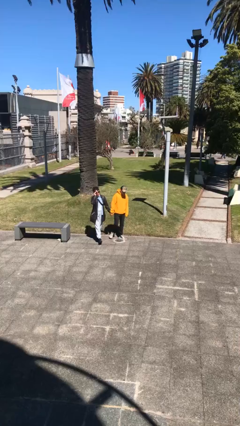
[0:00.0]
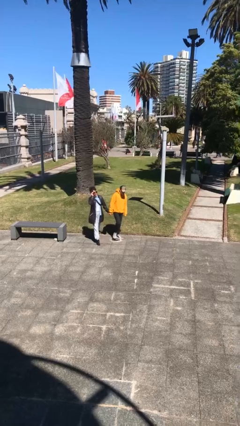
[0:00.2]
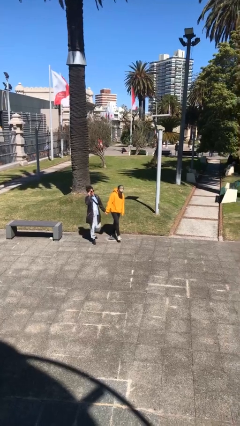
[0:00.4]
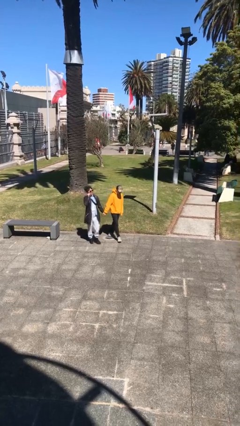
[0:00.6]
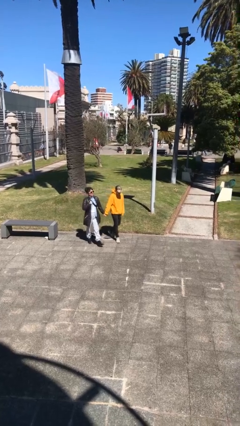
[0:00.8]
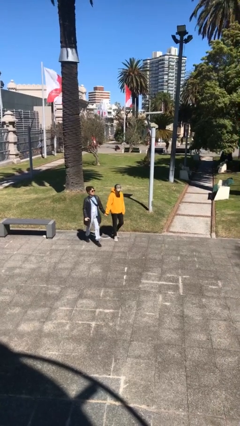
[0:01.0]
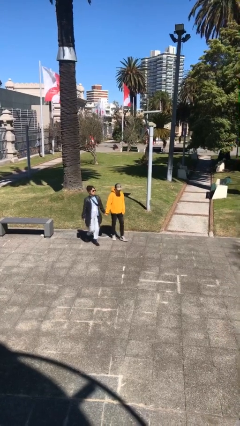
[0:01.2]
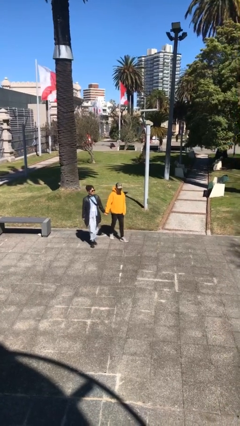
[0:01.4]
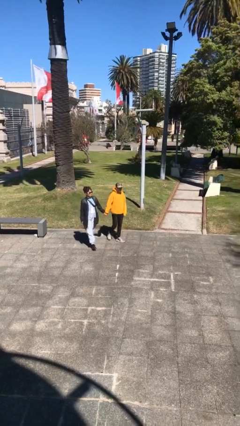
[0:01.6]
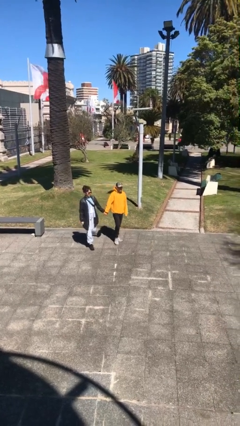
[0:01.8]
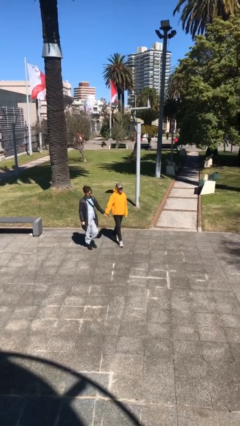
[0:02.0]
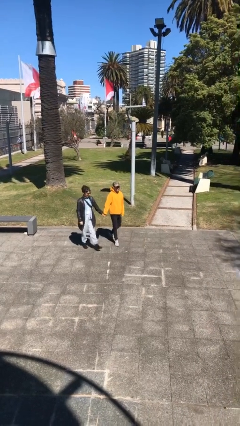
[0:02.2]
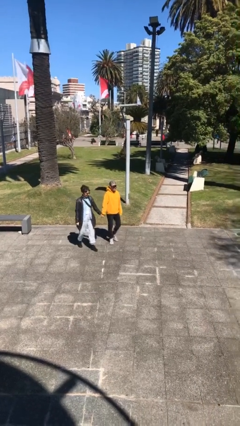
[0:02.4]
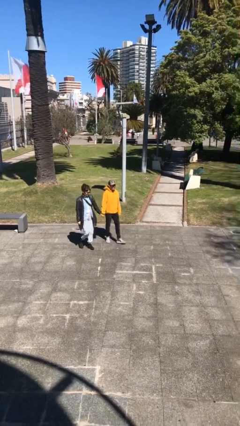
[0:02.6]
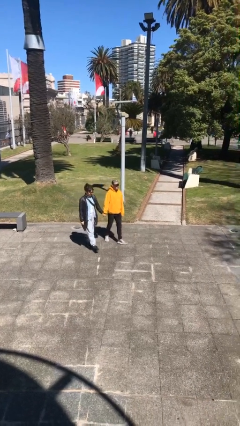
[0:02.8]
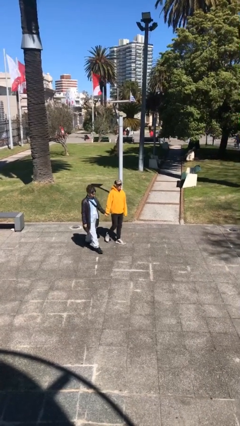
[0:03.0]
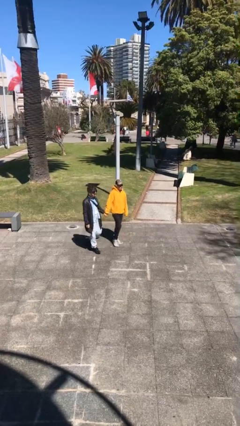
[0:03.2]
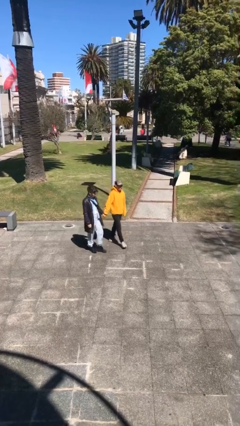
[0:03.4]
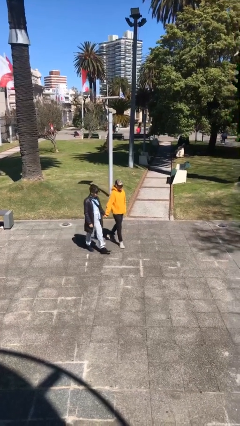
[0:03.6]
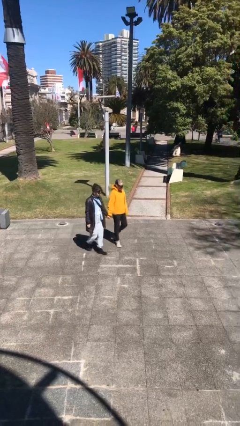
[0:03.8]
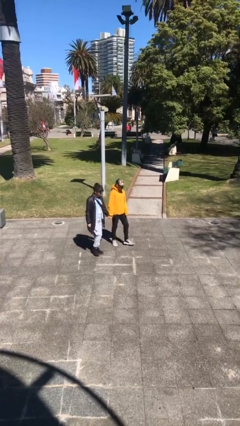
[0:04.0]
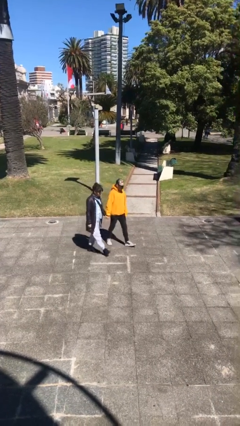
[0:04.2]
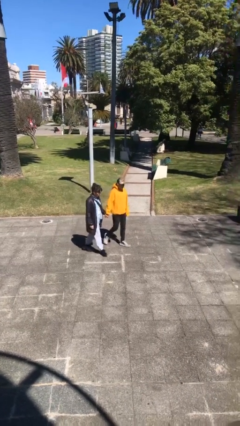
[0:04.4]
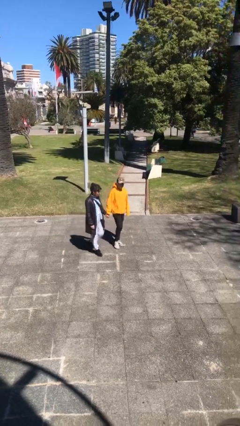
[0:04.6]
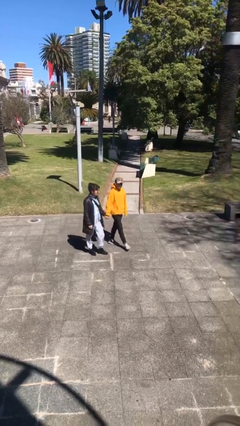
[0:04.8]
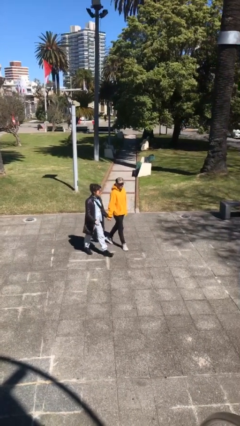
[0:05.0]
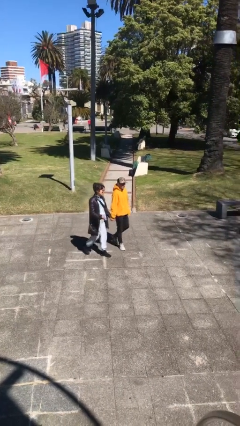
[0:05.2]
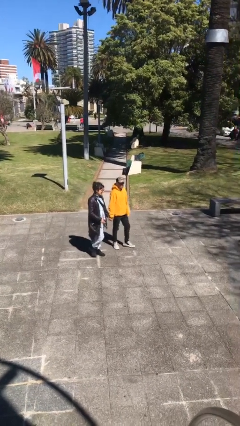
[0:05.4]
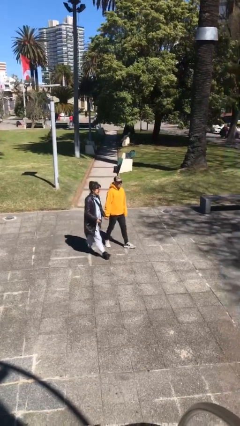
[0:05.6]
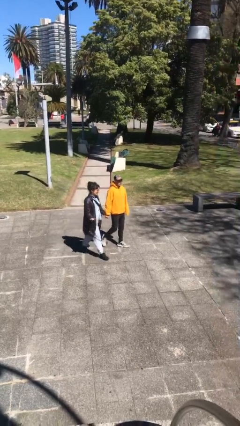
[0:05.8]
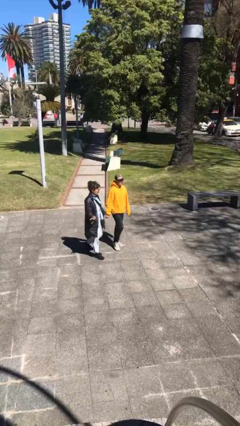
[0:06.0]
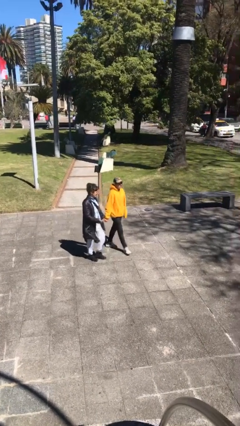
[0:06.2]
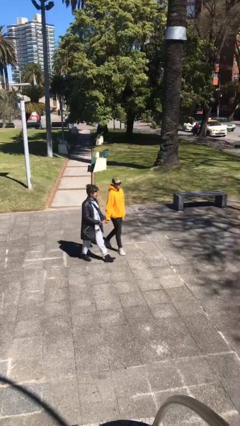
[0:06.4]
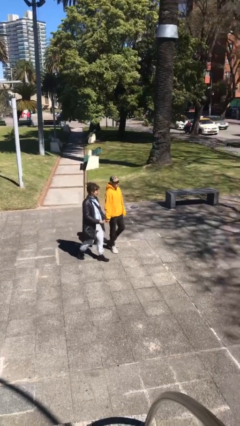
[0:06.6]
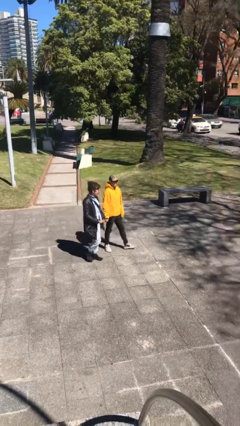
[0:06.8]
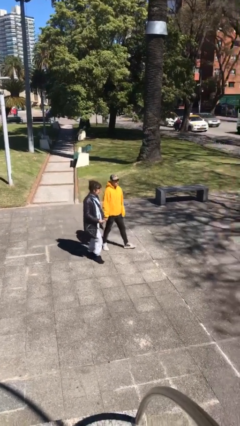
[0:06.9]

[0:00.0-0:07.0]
person holds hand

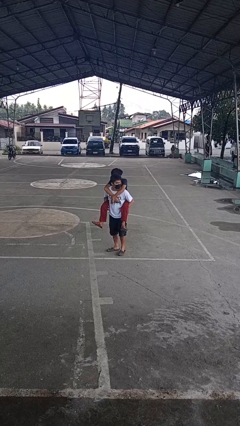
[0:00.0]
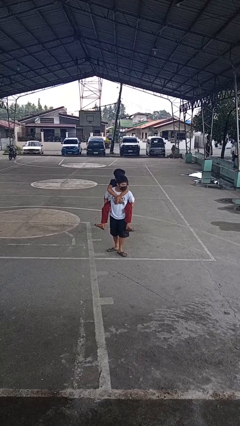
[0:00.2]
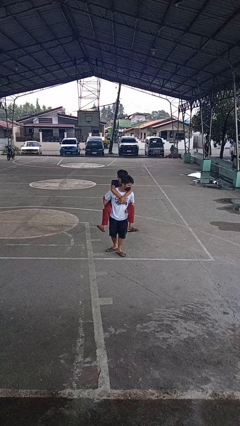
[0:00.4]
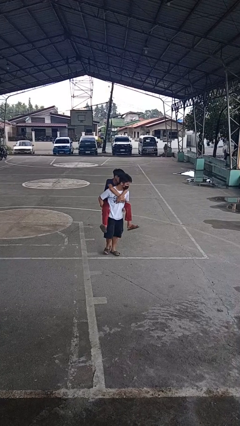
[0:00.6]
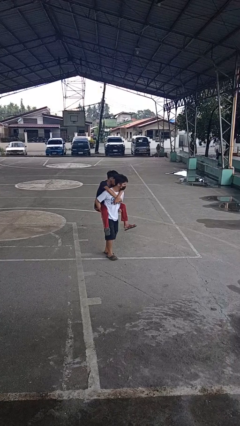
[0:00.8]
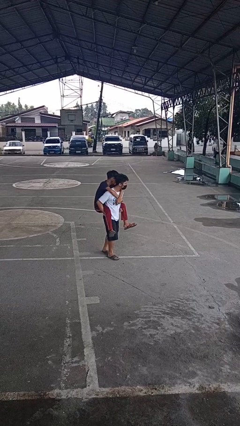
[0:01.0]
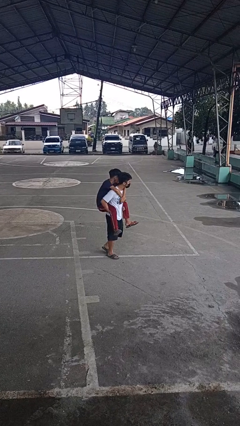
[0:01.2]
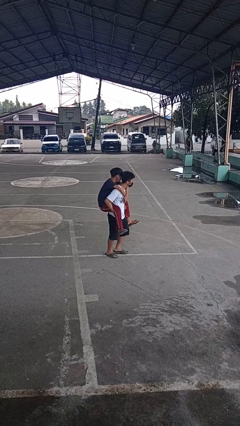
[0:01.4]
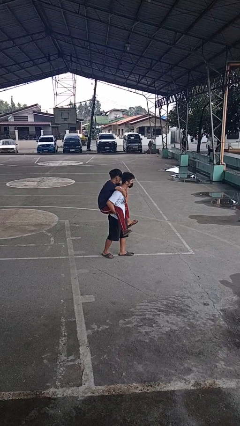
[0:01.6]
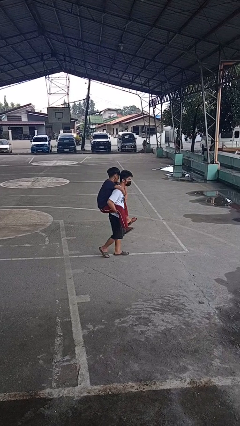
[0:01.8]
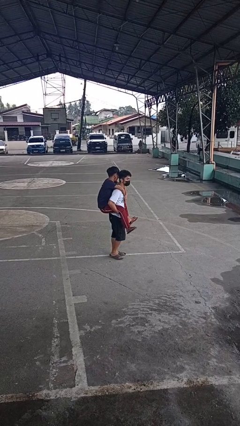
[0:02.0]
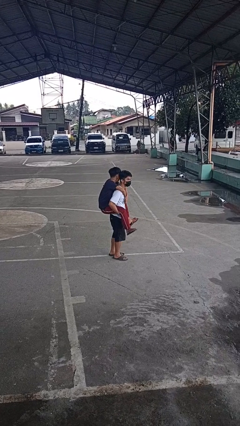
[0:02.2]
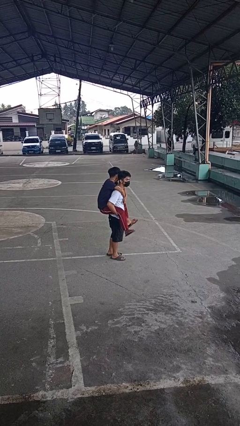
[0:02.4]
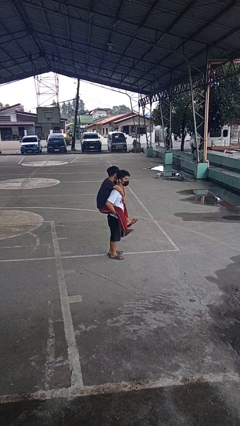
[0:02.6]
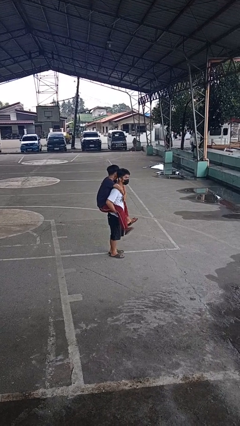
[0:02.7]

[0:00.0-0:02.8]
person carries person on shoulders

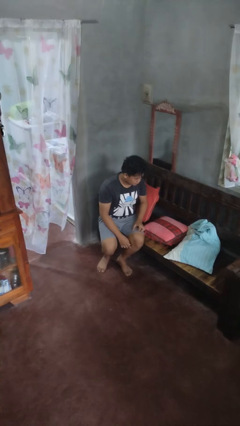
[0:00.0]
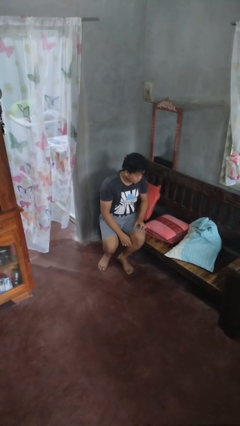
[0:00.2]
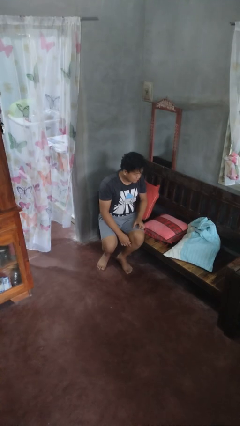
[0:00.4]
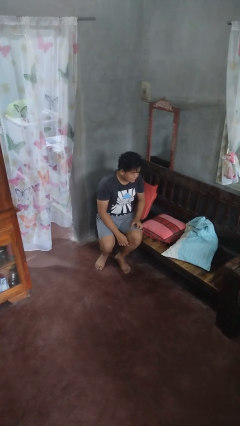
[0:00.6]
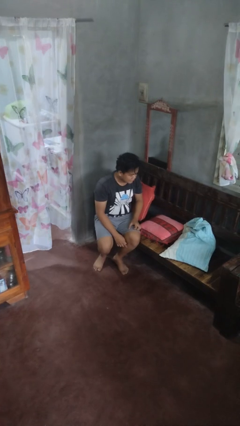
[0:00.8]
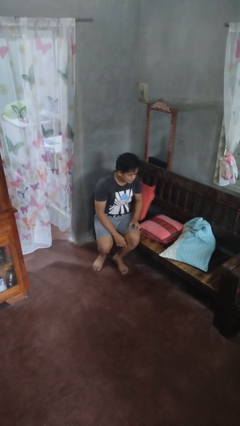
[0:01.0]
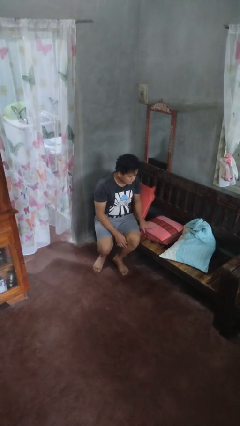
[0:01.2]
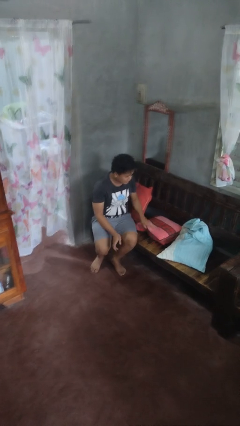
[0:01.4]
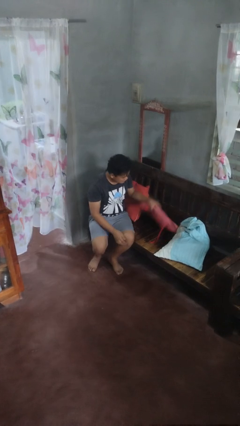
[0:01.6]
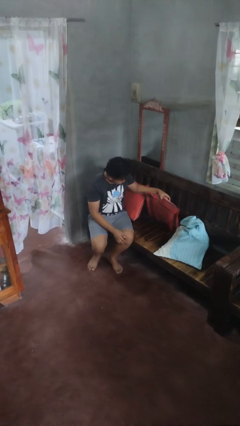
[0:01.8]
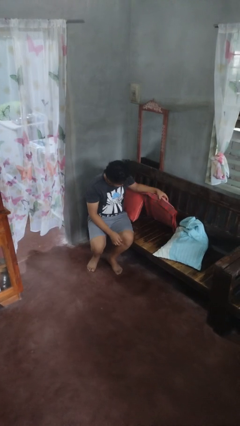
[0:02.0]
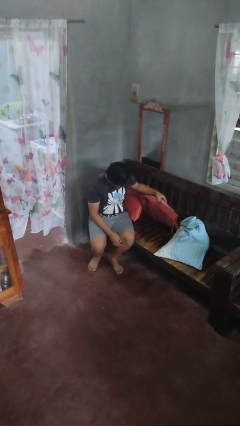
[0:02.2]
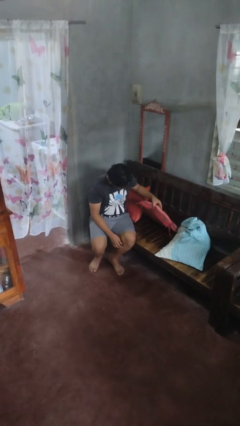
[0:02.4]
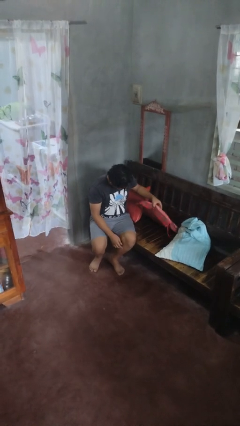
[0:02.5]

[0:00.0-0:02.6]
person searches in couch

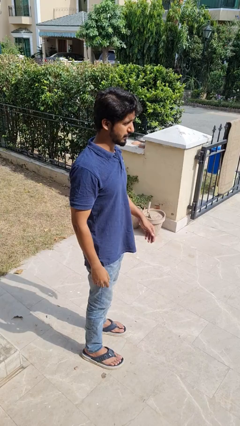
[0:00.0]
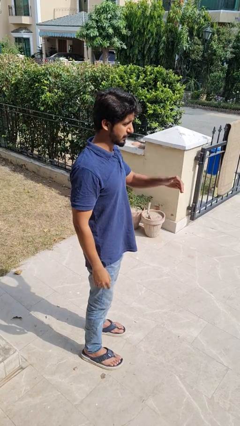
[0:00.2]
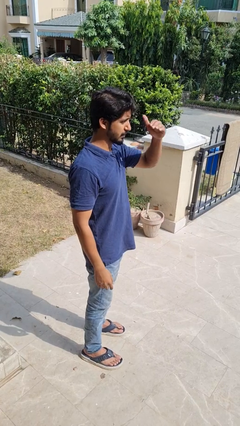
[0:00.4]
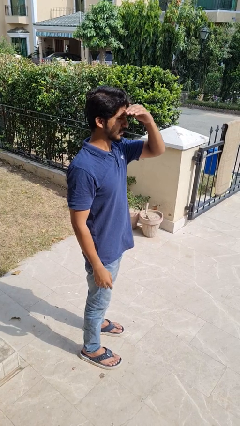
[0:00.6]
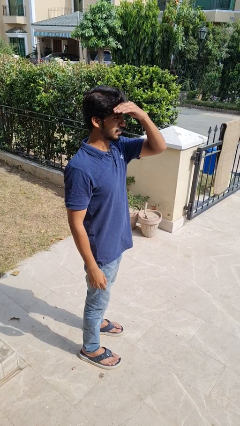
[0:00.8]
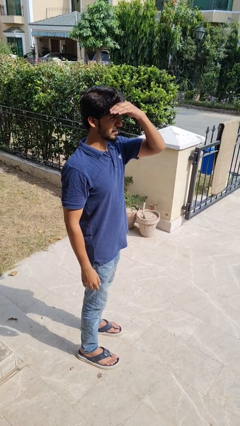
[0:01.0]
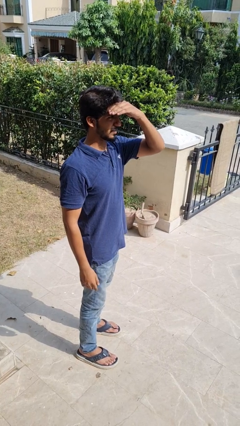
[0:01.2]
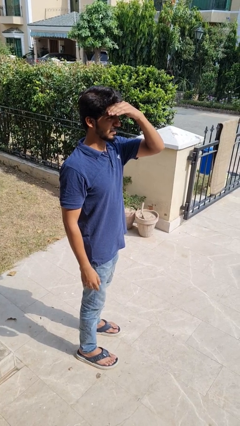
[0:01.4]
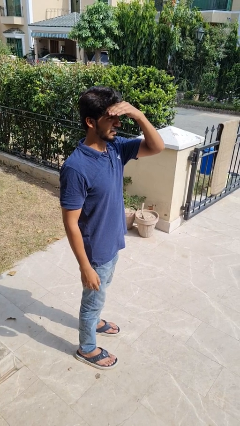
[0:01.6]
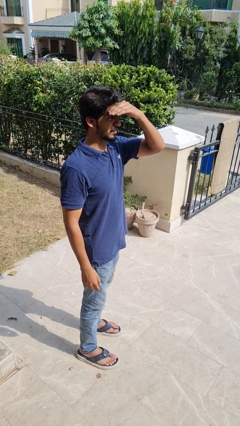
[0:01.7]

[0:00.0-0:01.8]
person shades eyes

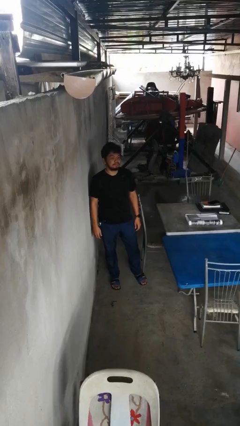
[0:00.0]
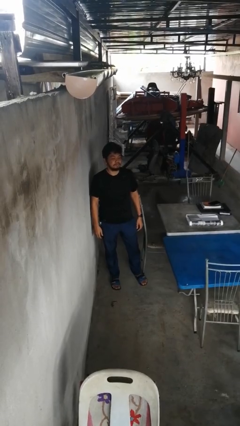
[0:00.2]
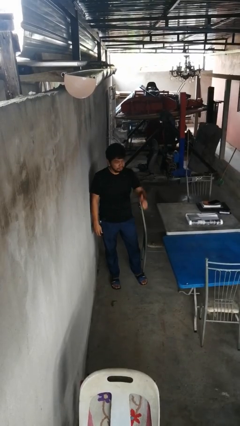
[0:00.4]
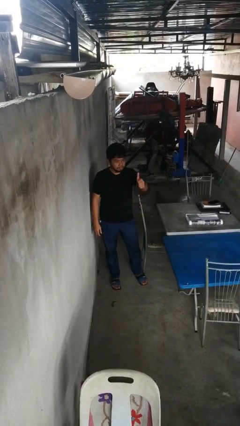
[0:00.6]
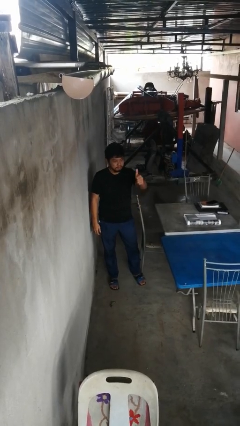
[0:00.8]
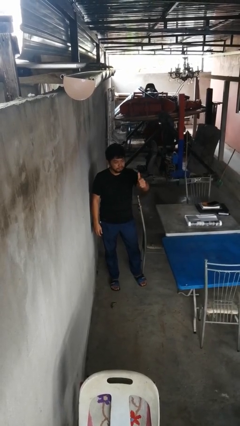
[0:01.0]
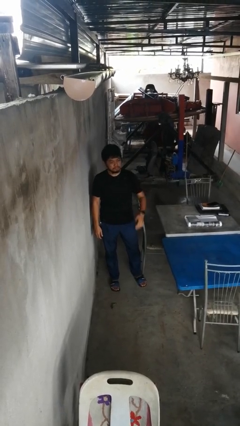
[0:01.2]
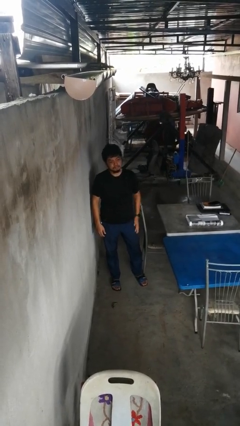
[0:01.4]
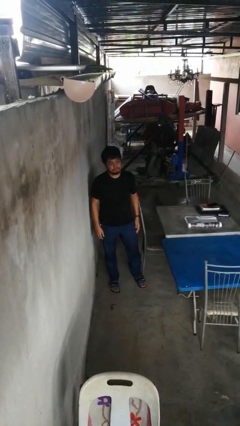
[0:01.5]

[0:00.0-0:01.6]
person gestures thumbs up

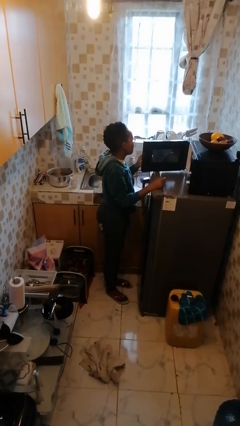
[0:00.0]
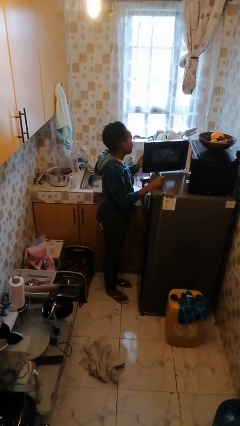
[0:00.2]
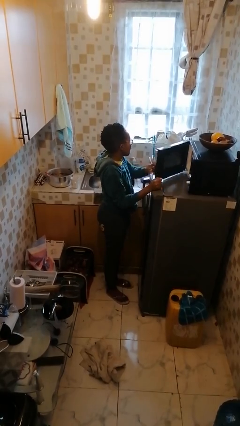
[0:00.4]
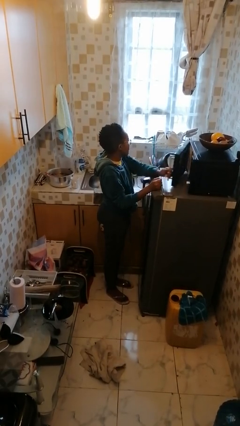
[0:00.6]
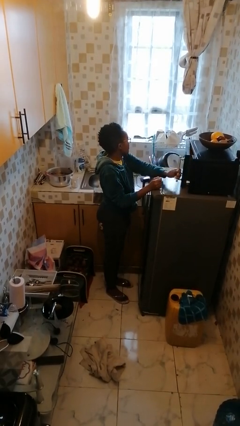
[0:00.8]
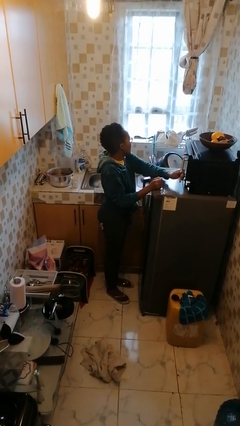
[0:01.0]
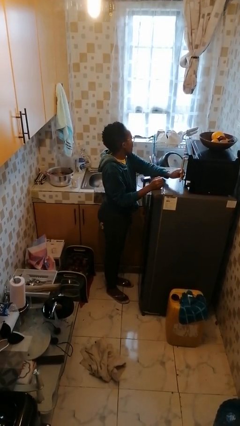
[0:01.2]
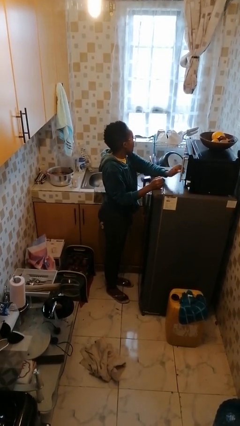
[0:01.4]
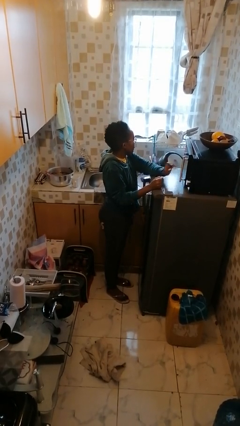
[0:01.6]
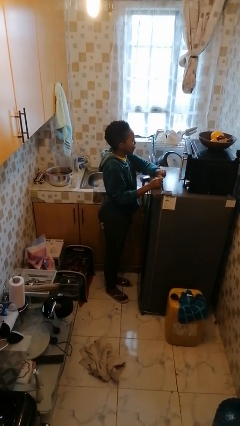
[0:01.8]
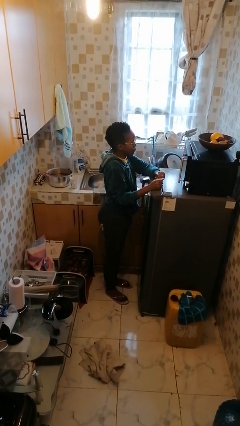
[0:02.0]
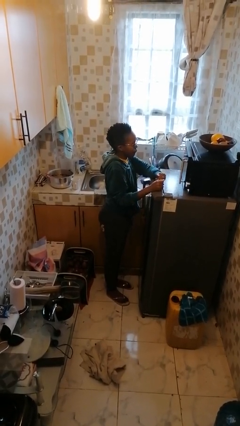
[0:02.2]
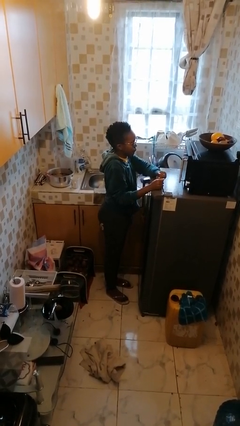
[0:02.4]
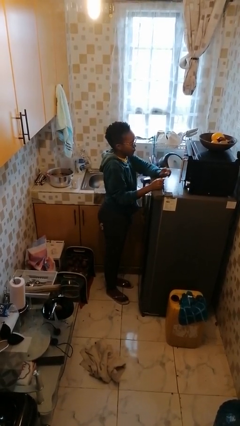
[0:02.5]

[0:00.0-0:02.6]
person closes microwave
